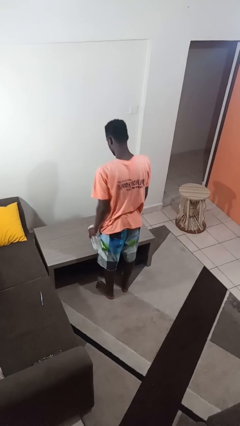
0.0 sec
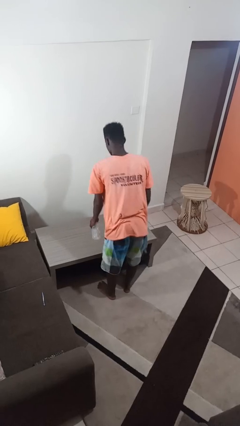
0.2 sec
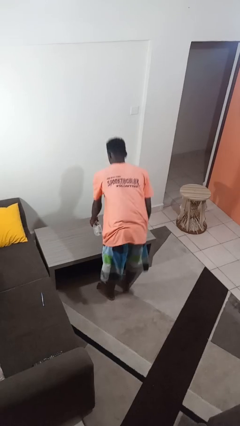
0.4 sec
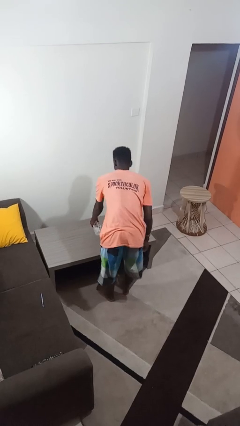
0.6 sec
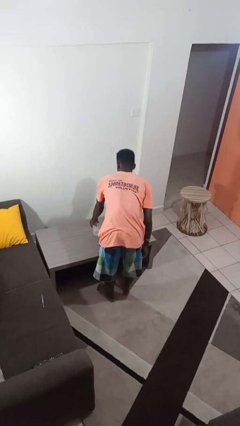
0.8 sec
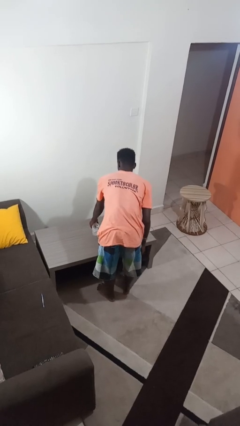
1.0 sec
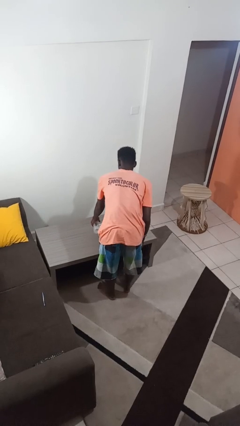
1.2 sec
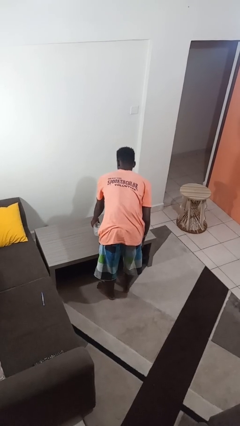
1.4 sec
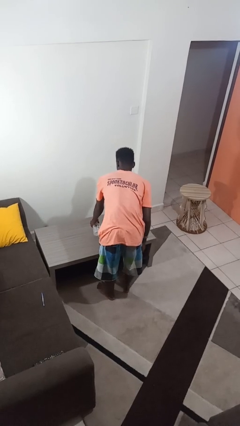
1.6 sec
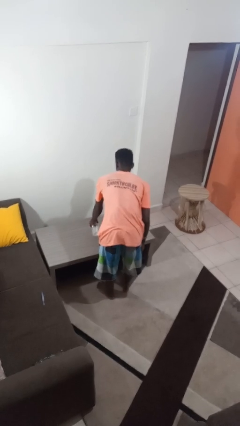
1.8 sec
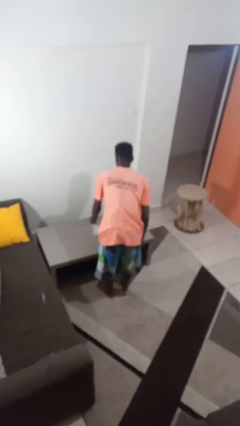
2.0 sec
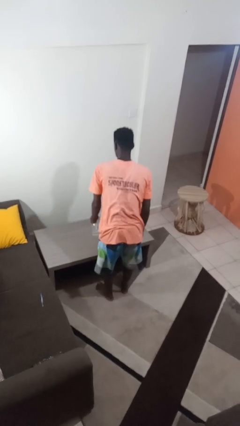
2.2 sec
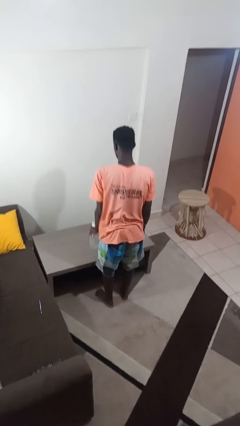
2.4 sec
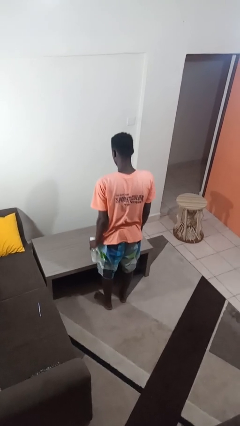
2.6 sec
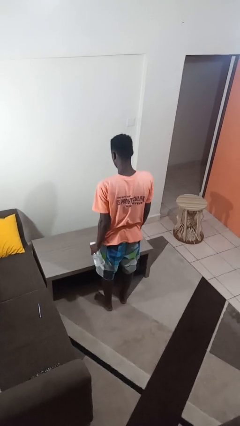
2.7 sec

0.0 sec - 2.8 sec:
person sprays from bottle

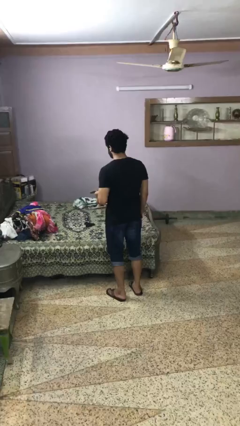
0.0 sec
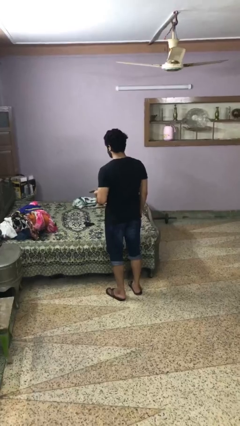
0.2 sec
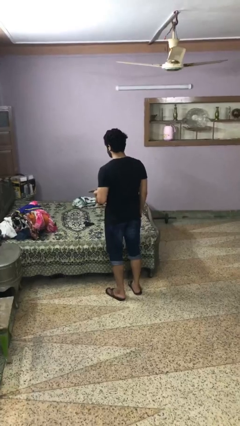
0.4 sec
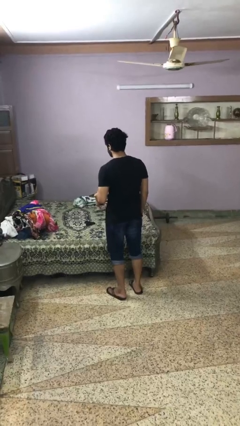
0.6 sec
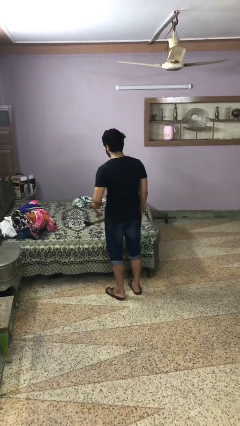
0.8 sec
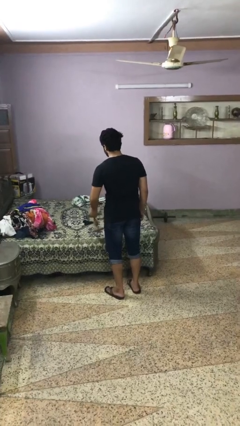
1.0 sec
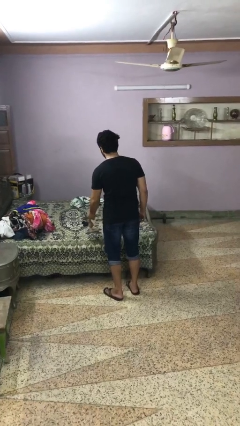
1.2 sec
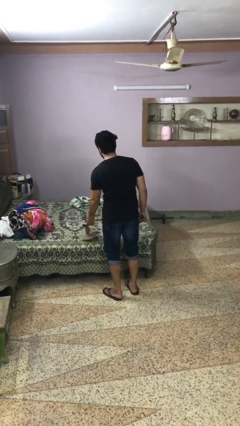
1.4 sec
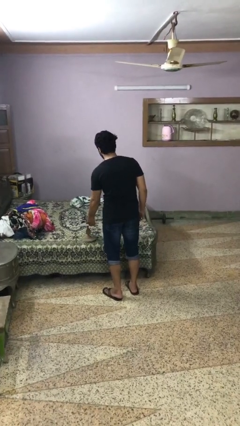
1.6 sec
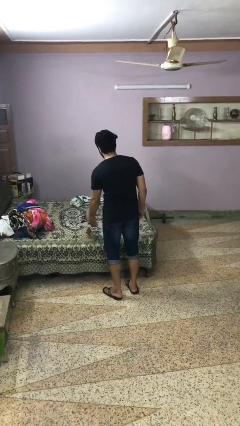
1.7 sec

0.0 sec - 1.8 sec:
person puts down object on bed

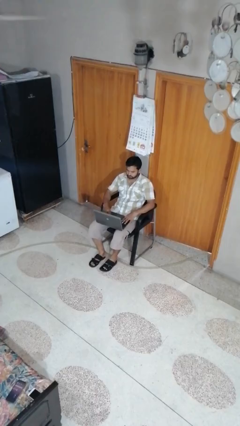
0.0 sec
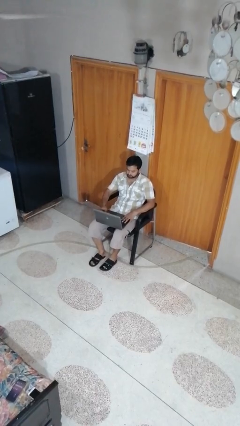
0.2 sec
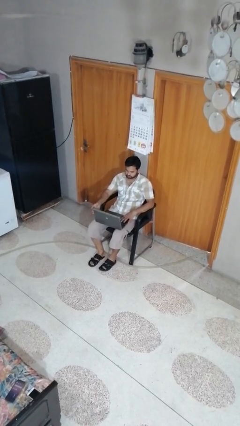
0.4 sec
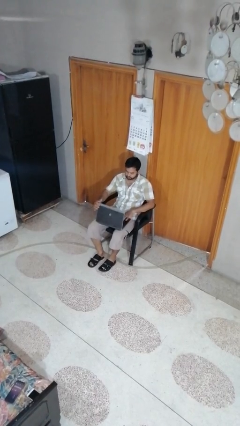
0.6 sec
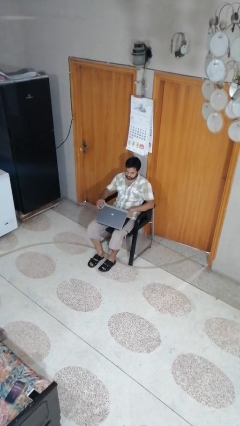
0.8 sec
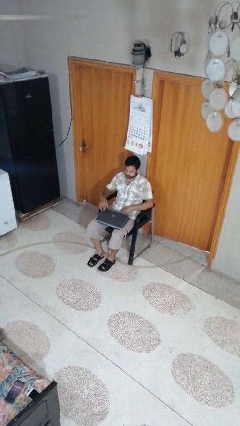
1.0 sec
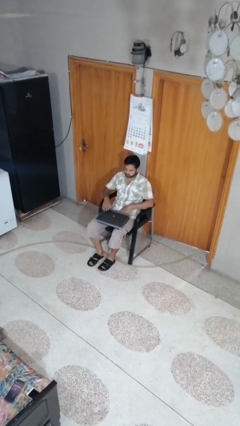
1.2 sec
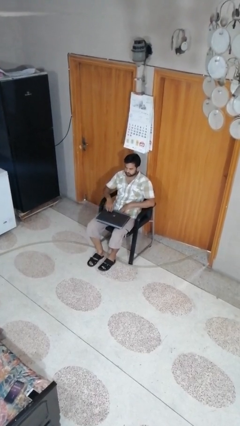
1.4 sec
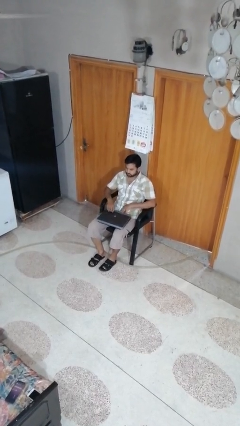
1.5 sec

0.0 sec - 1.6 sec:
person closes laptop

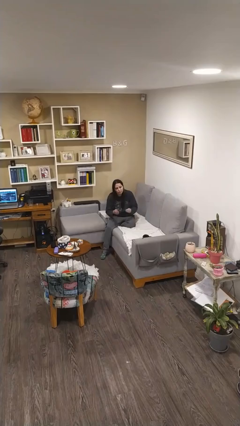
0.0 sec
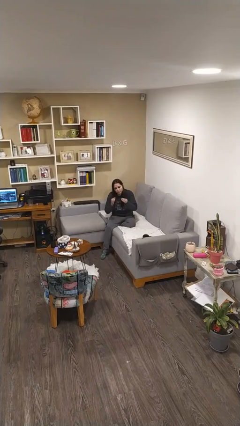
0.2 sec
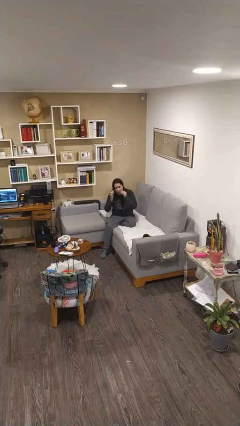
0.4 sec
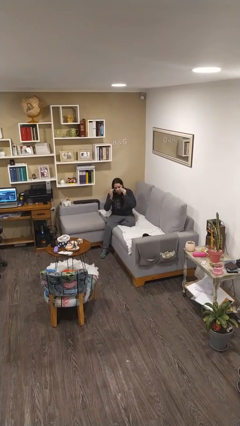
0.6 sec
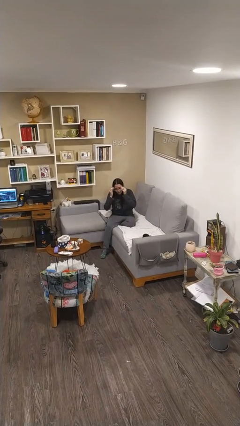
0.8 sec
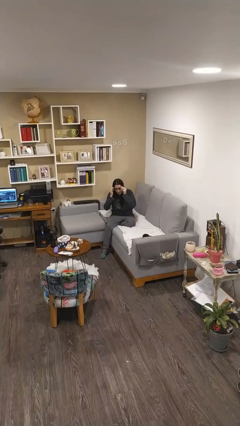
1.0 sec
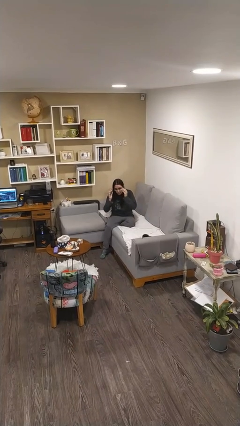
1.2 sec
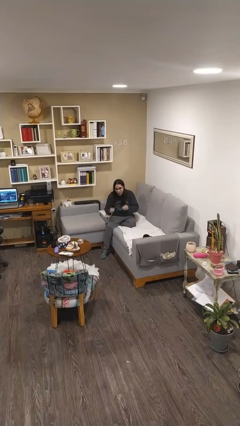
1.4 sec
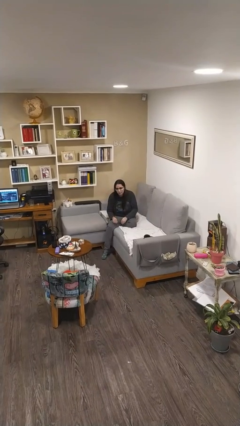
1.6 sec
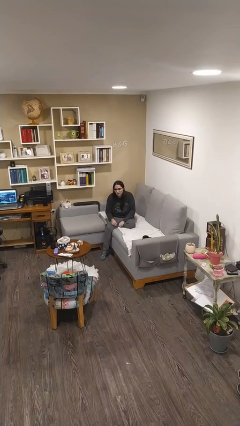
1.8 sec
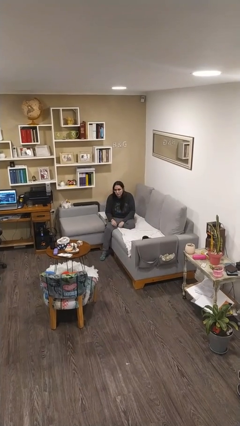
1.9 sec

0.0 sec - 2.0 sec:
person puts on glasses

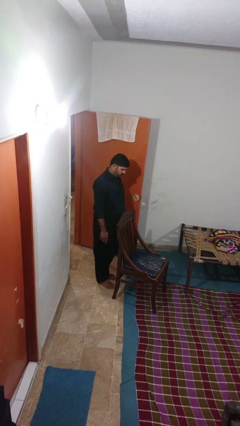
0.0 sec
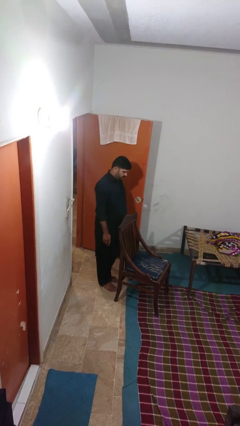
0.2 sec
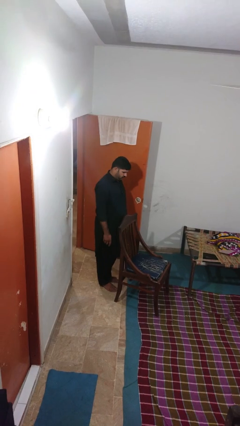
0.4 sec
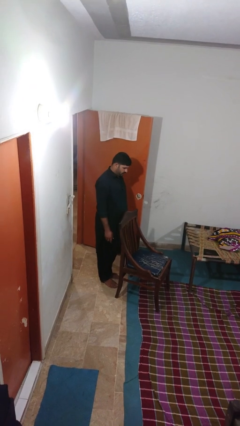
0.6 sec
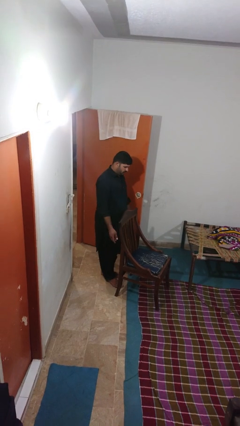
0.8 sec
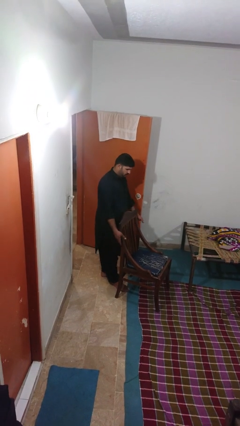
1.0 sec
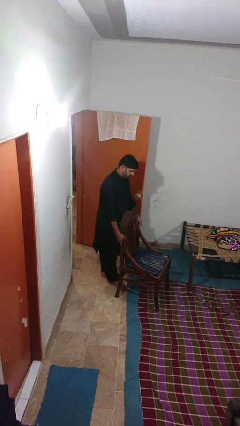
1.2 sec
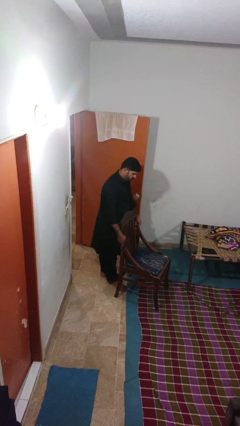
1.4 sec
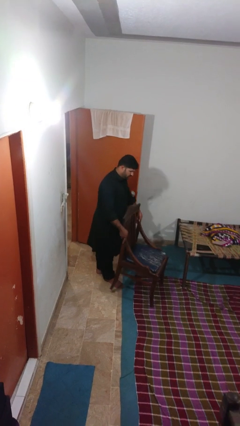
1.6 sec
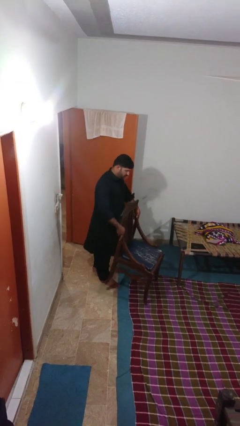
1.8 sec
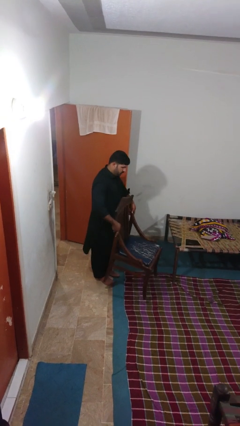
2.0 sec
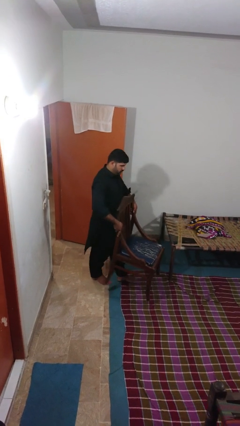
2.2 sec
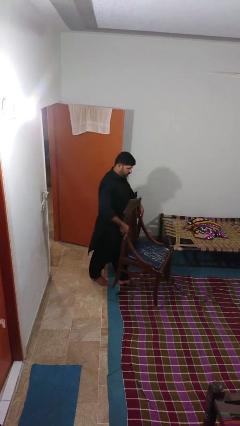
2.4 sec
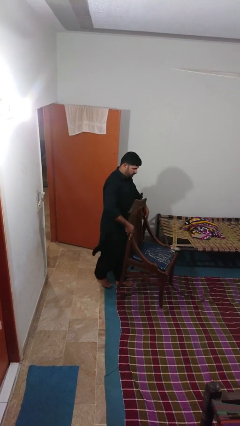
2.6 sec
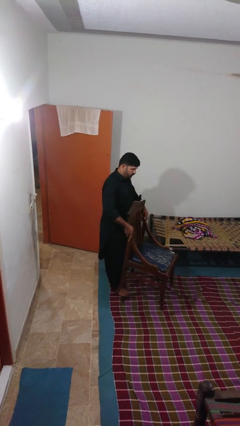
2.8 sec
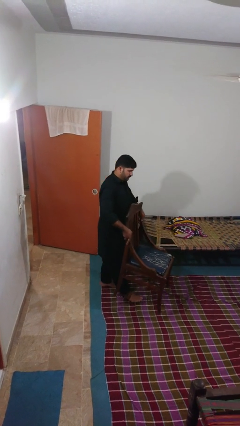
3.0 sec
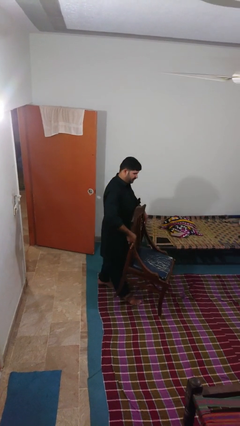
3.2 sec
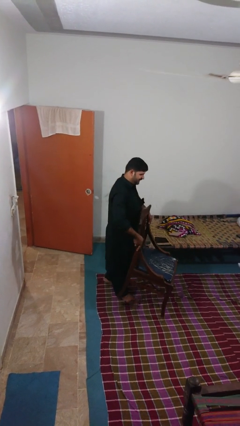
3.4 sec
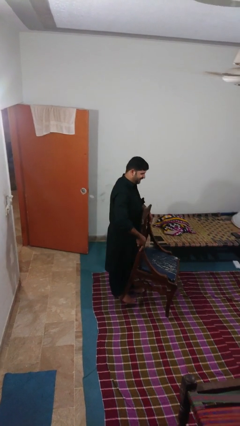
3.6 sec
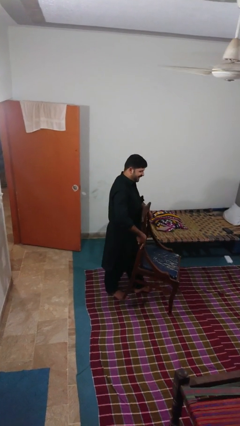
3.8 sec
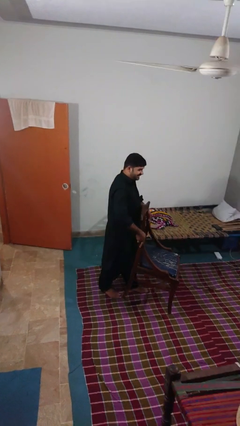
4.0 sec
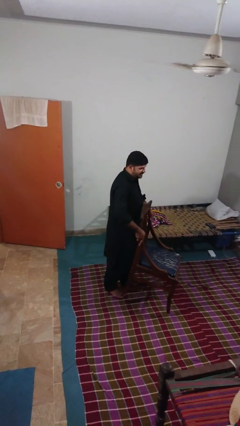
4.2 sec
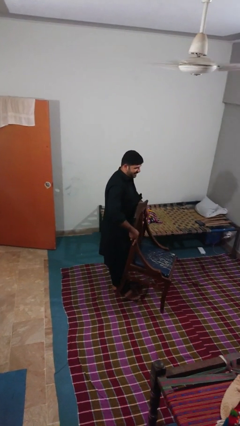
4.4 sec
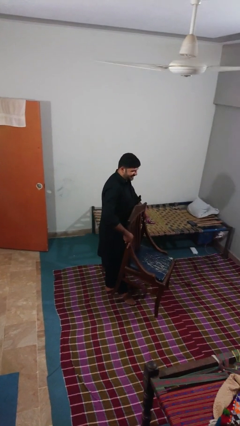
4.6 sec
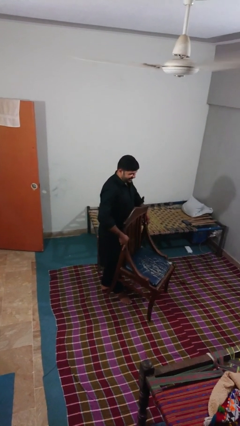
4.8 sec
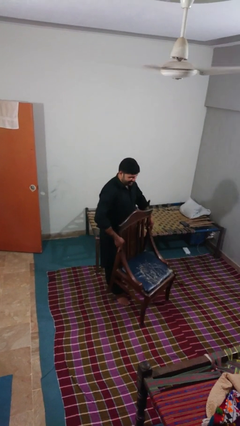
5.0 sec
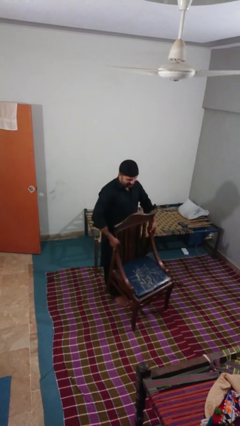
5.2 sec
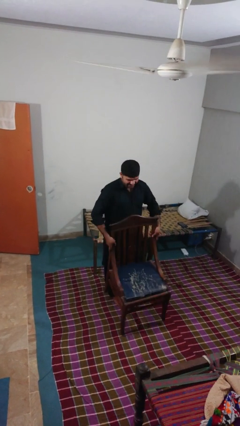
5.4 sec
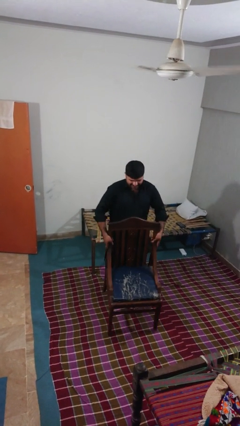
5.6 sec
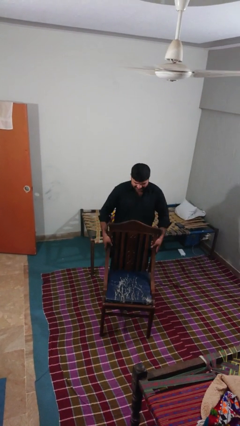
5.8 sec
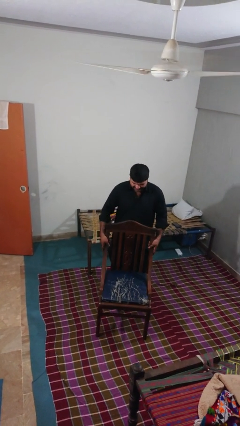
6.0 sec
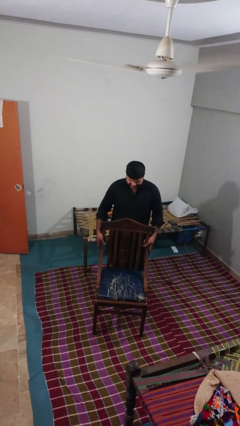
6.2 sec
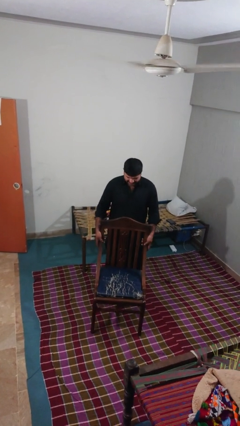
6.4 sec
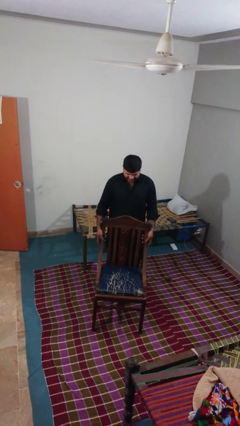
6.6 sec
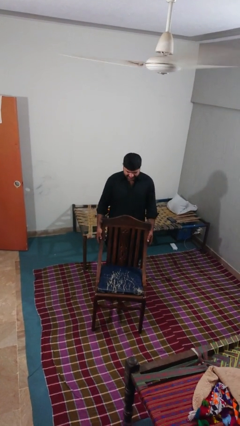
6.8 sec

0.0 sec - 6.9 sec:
person carries furniture

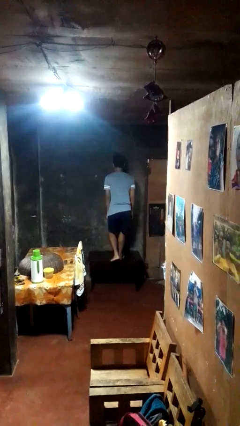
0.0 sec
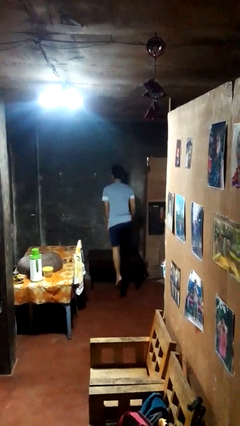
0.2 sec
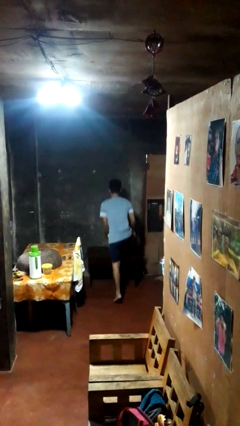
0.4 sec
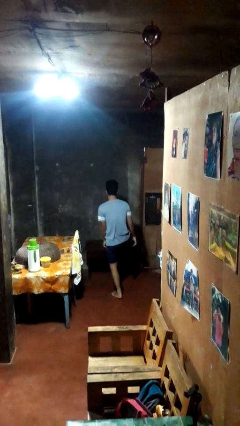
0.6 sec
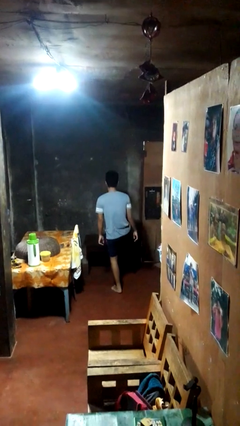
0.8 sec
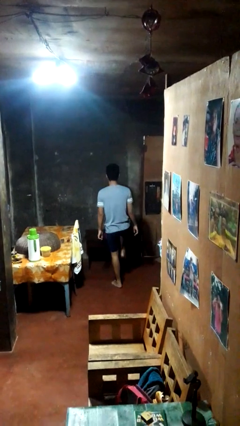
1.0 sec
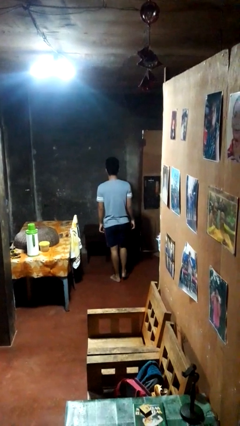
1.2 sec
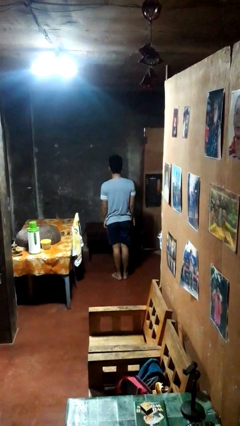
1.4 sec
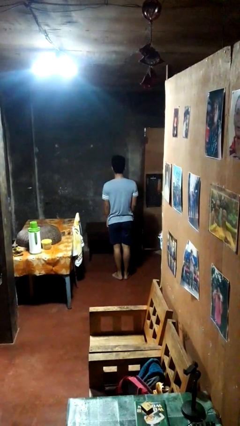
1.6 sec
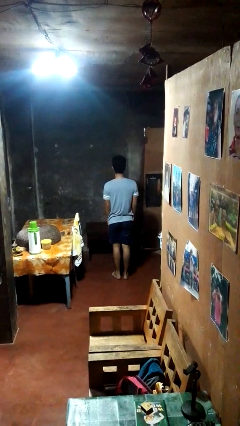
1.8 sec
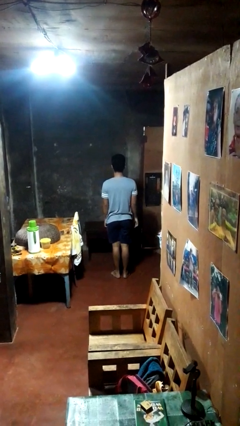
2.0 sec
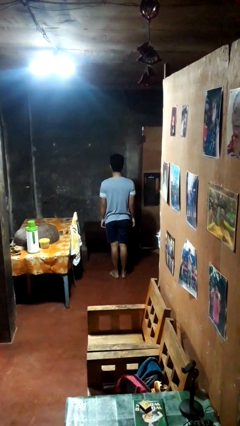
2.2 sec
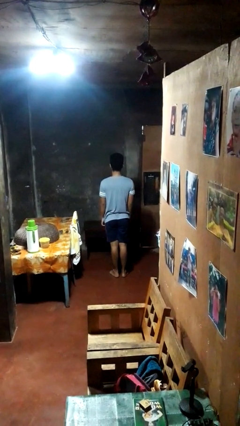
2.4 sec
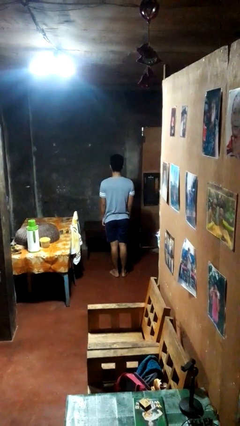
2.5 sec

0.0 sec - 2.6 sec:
person climbs off table
